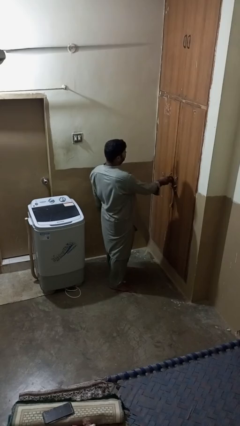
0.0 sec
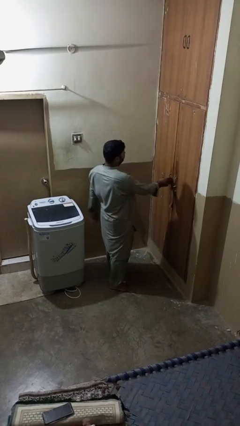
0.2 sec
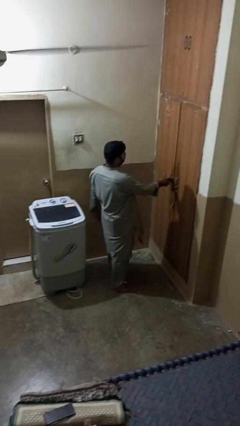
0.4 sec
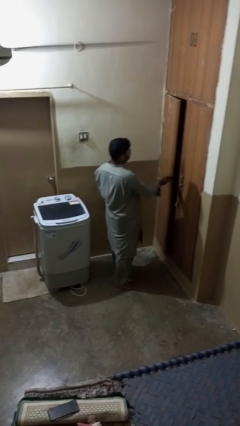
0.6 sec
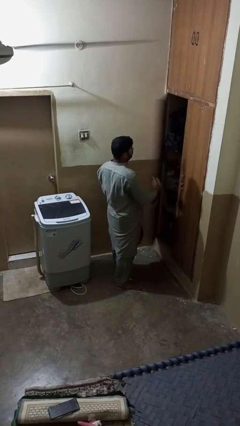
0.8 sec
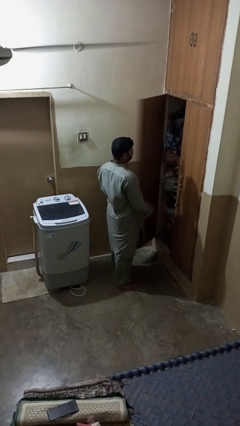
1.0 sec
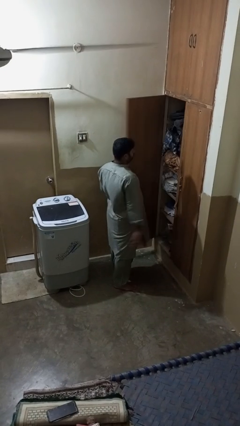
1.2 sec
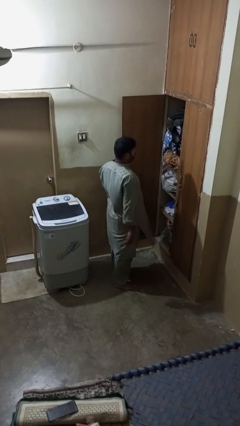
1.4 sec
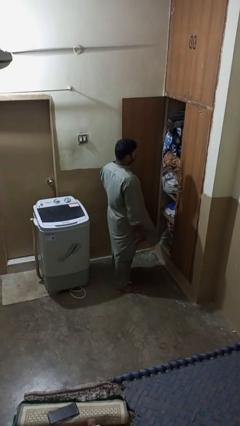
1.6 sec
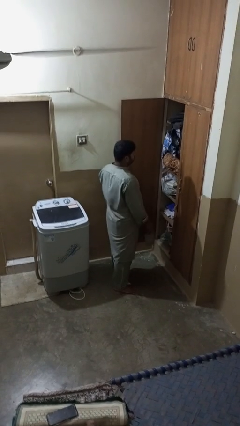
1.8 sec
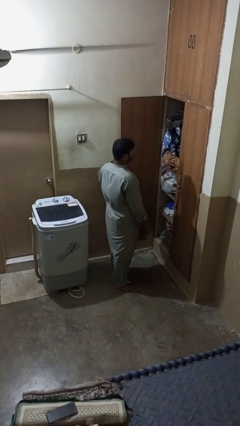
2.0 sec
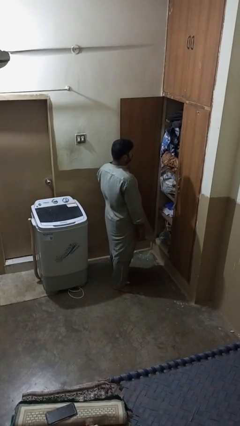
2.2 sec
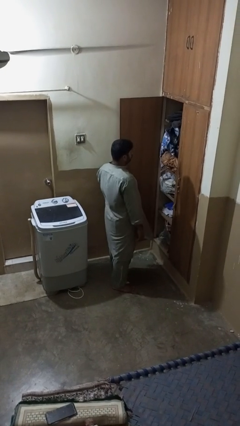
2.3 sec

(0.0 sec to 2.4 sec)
person opens closet door

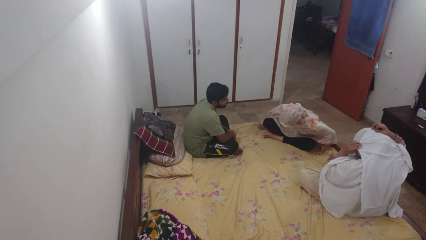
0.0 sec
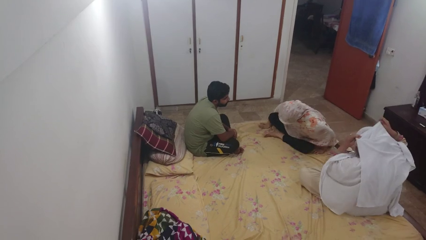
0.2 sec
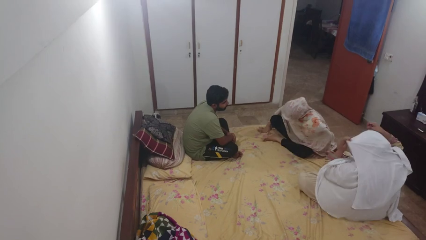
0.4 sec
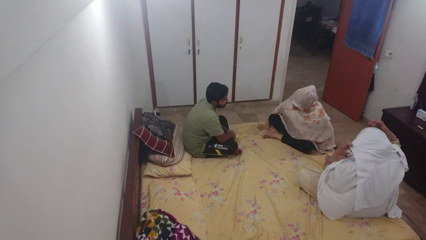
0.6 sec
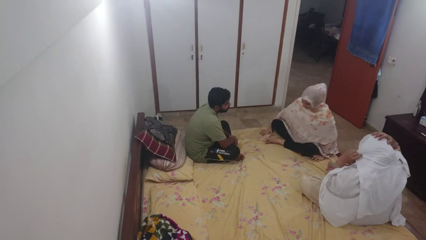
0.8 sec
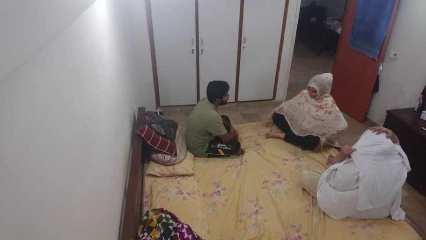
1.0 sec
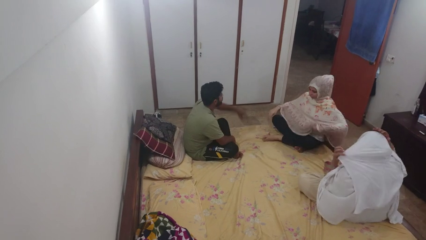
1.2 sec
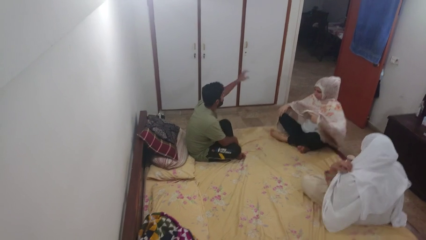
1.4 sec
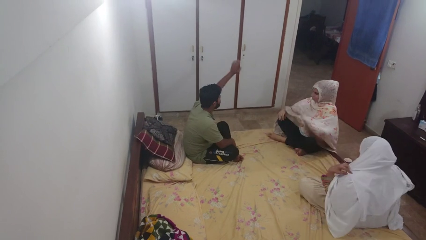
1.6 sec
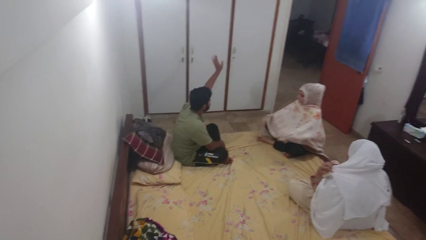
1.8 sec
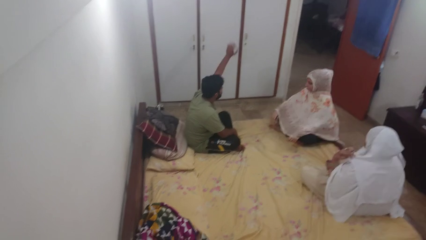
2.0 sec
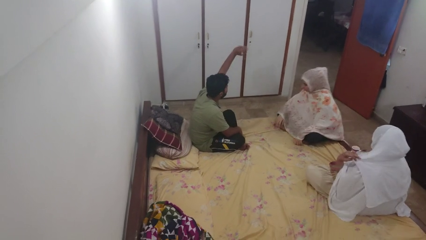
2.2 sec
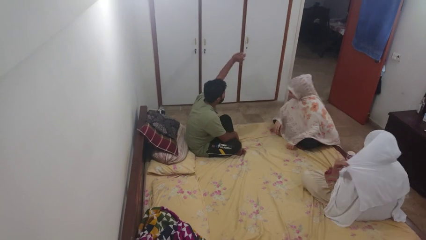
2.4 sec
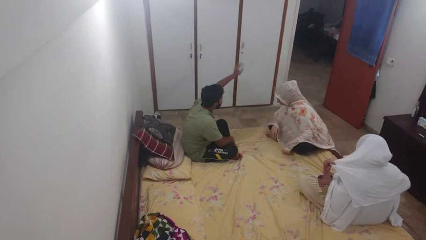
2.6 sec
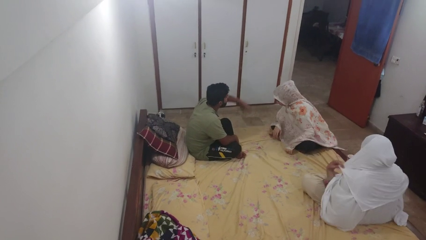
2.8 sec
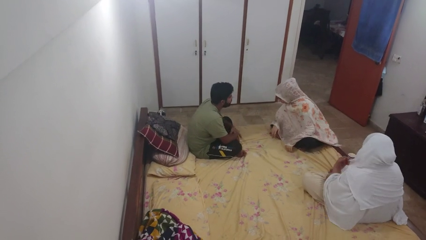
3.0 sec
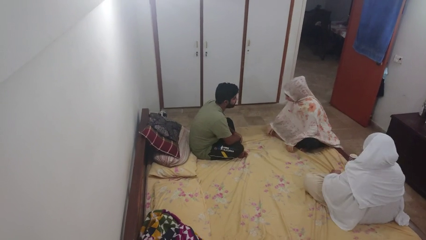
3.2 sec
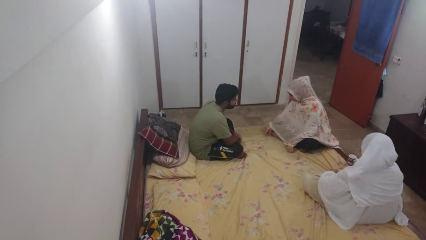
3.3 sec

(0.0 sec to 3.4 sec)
person waves at person

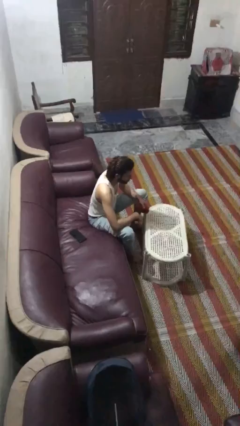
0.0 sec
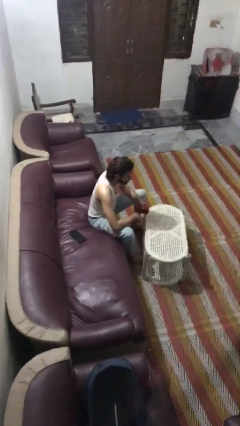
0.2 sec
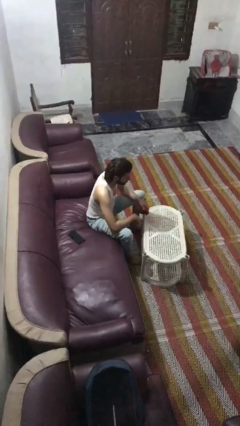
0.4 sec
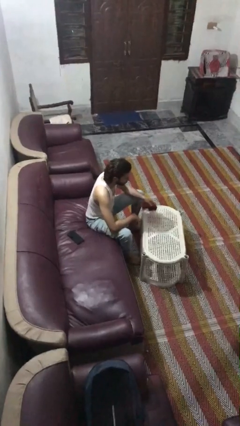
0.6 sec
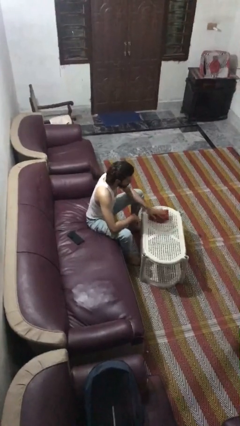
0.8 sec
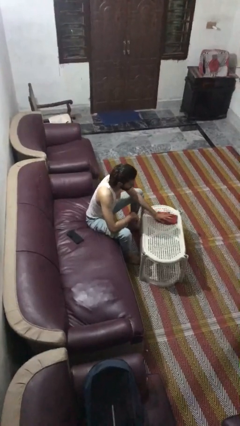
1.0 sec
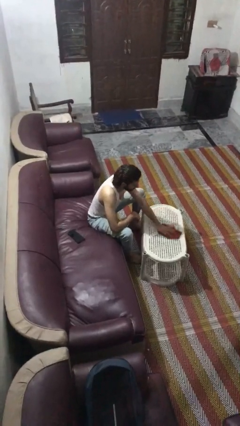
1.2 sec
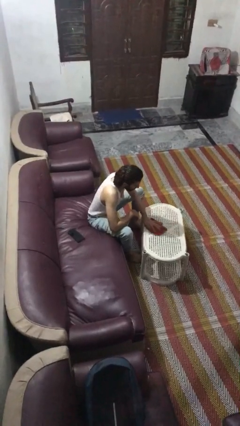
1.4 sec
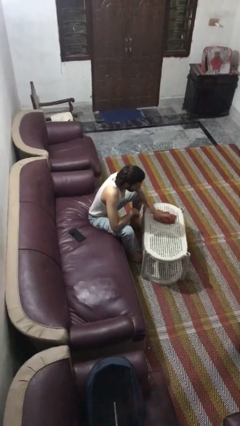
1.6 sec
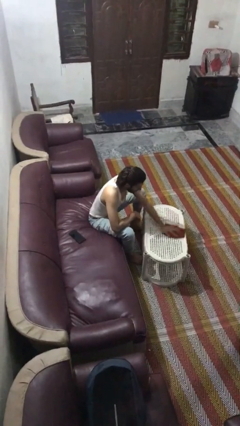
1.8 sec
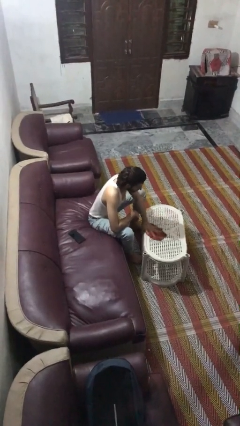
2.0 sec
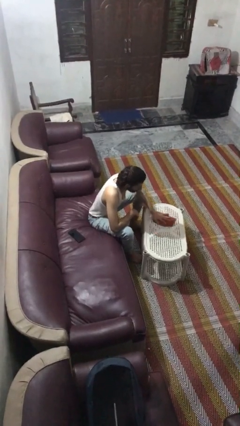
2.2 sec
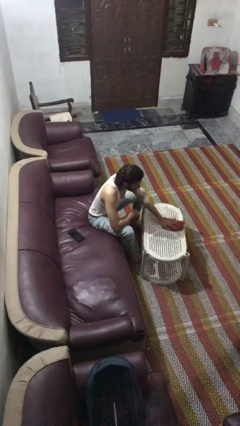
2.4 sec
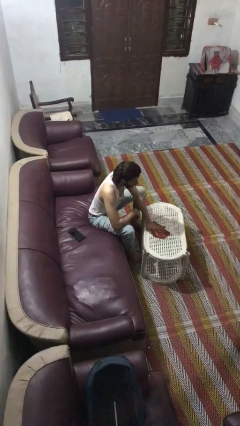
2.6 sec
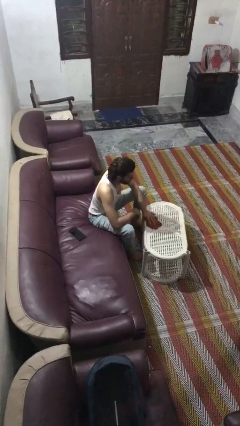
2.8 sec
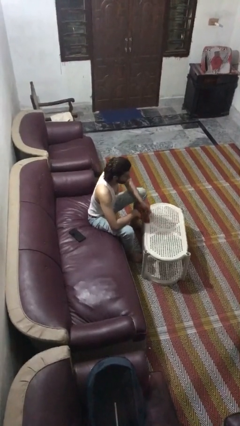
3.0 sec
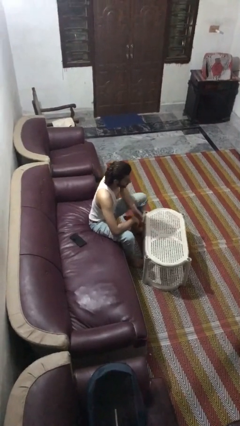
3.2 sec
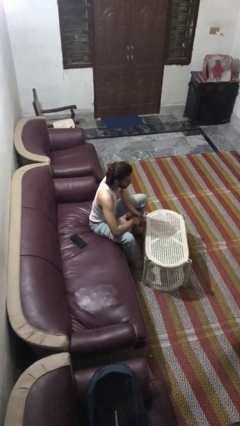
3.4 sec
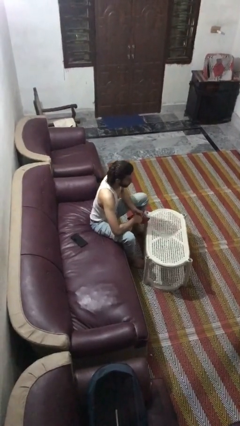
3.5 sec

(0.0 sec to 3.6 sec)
person cleans table with rag

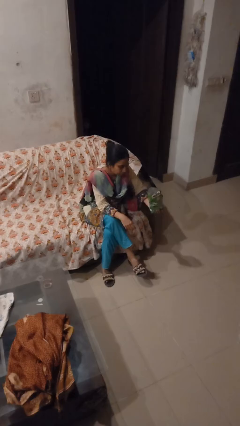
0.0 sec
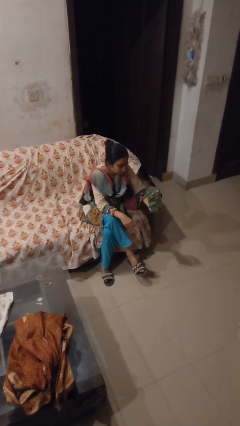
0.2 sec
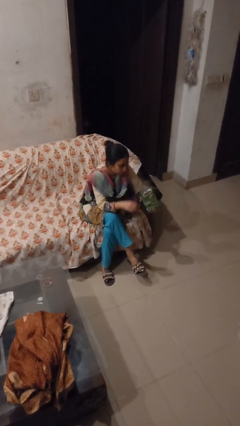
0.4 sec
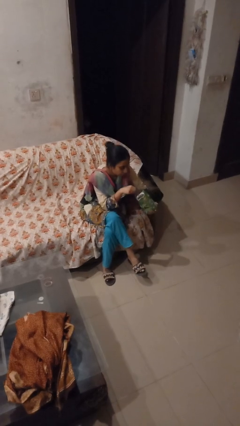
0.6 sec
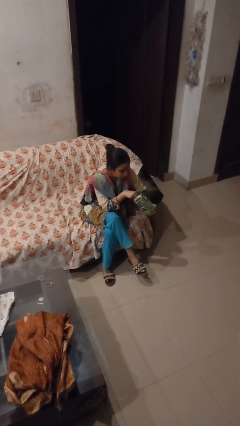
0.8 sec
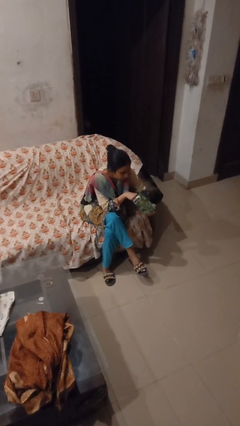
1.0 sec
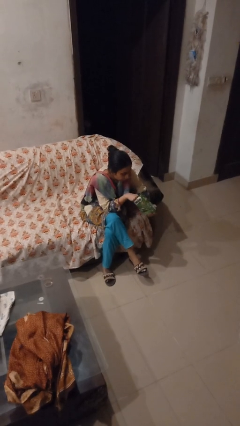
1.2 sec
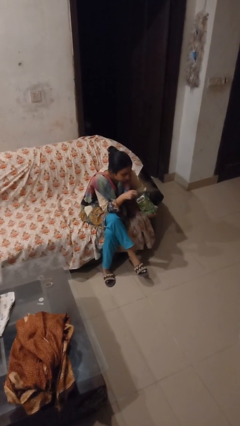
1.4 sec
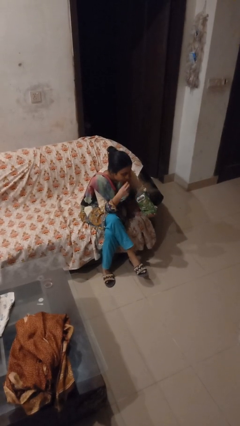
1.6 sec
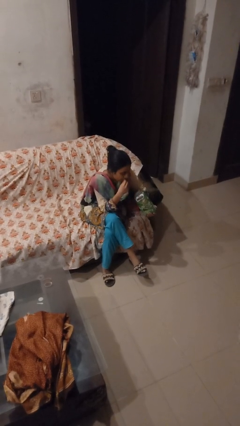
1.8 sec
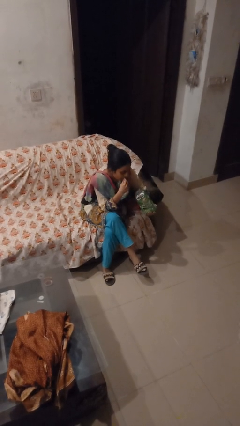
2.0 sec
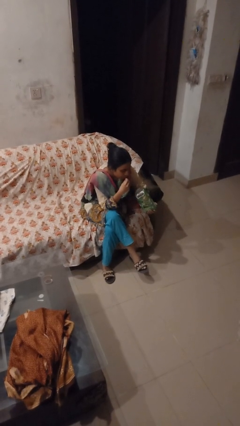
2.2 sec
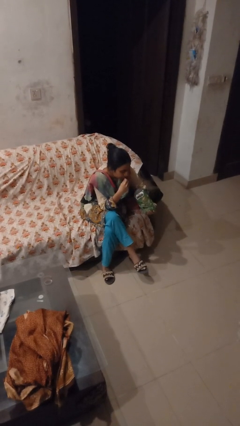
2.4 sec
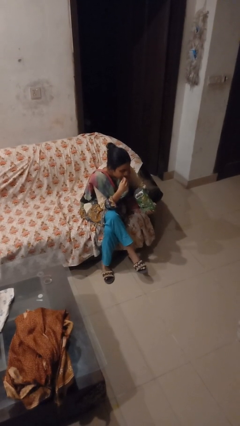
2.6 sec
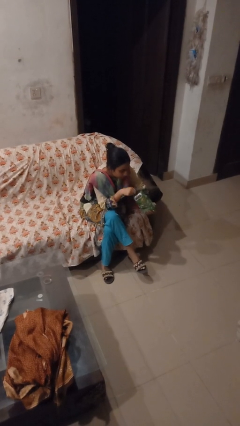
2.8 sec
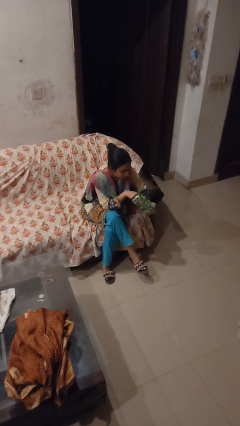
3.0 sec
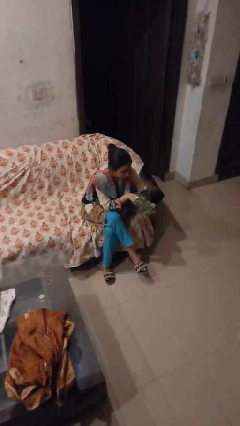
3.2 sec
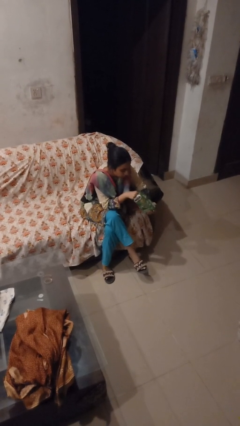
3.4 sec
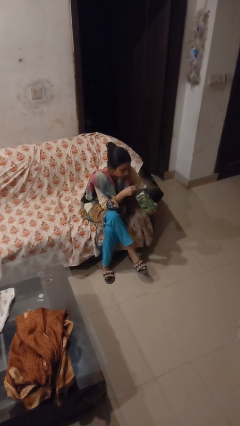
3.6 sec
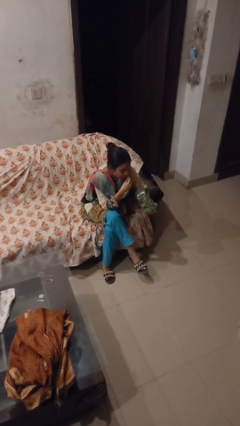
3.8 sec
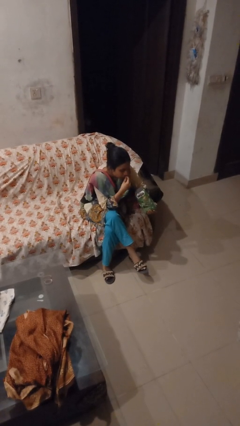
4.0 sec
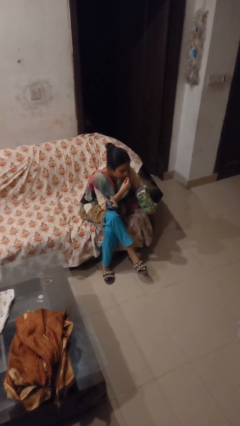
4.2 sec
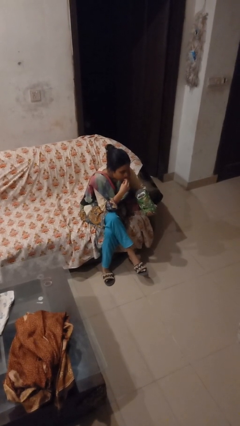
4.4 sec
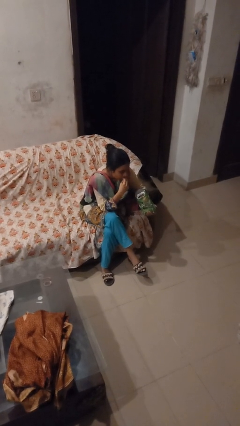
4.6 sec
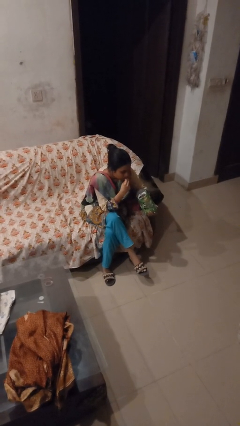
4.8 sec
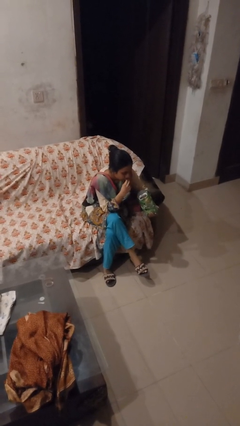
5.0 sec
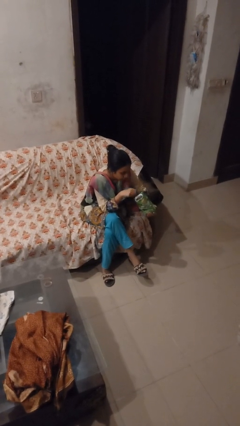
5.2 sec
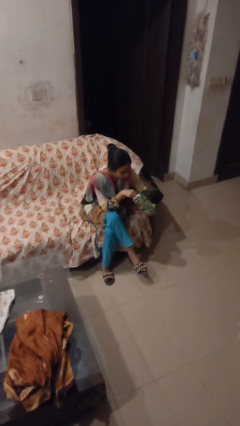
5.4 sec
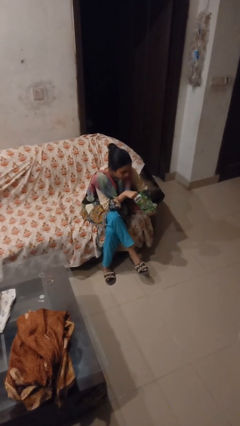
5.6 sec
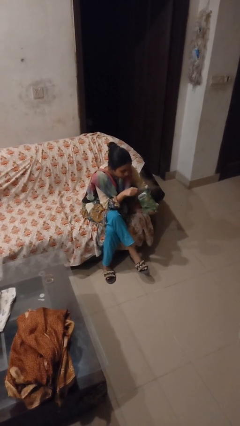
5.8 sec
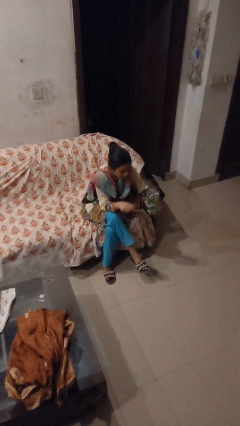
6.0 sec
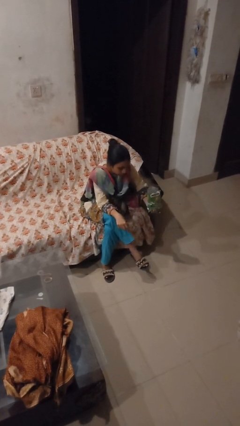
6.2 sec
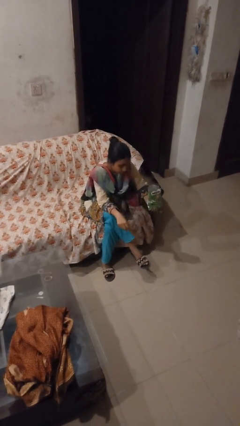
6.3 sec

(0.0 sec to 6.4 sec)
person eats snack from bag

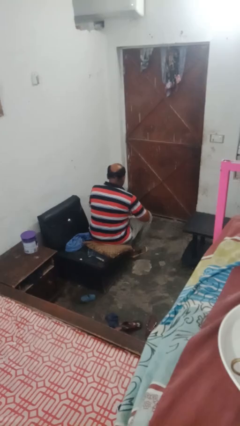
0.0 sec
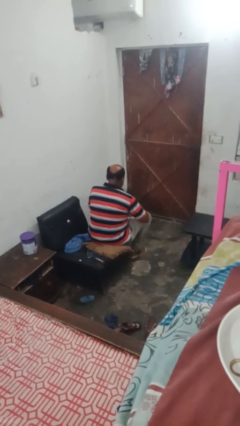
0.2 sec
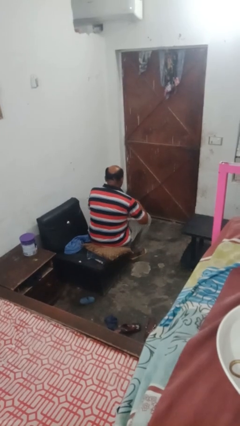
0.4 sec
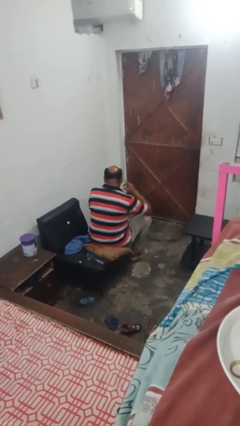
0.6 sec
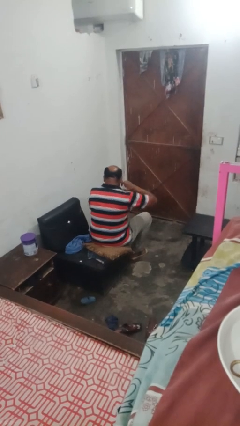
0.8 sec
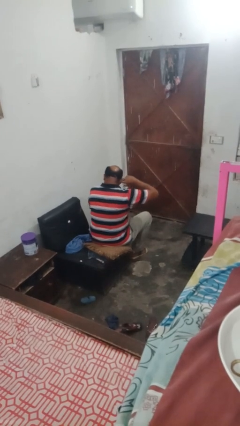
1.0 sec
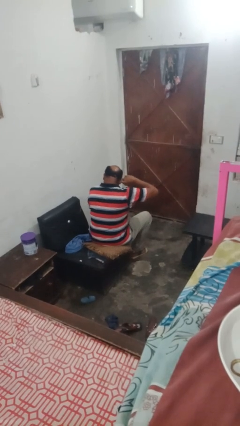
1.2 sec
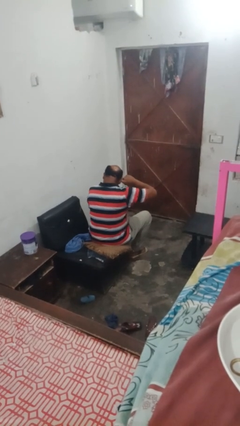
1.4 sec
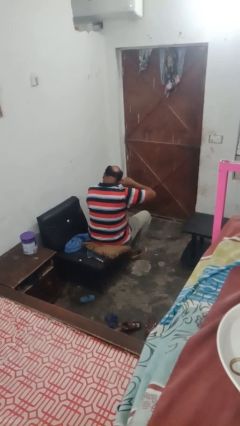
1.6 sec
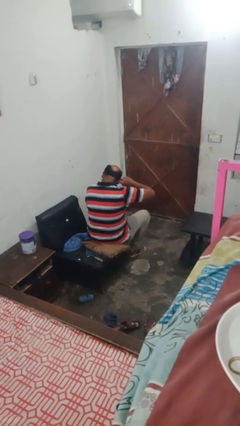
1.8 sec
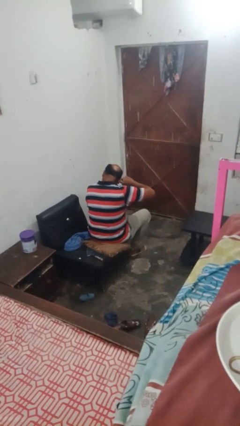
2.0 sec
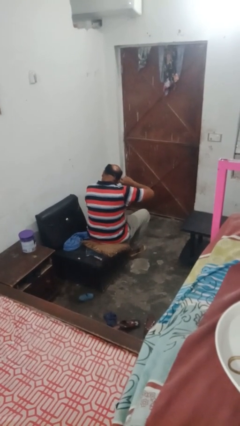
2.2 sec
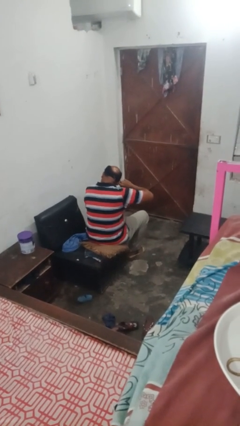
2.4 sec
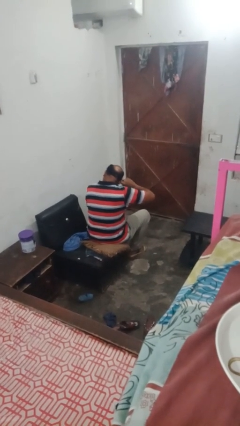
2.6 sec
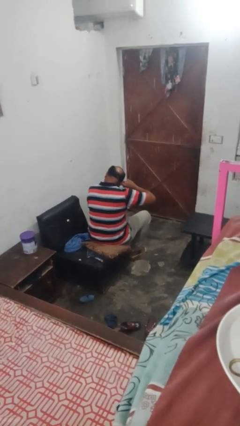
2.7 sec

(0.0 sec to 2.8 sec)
person puts fingers in ear
